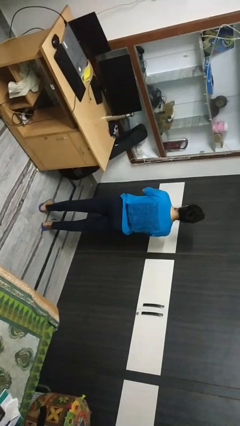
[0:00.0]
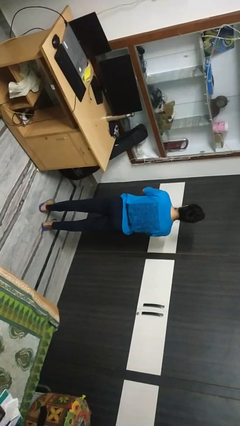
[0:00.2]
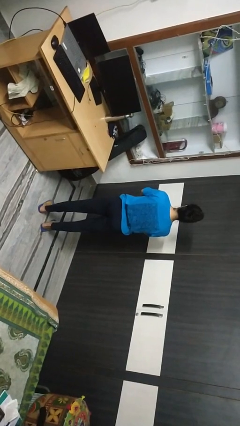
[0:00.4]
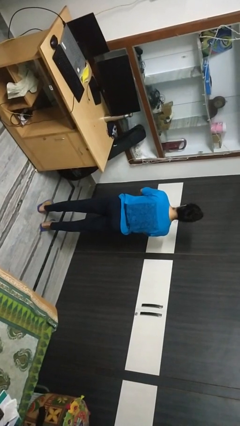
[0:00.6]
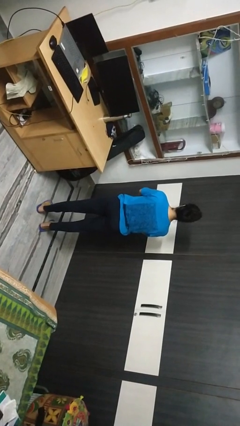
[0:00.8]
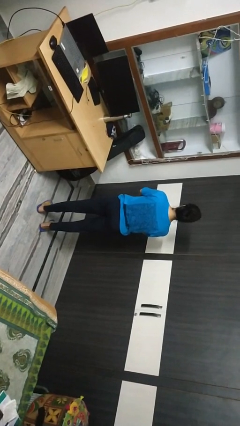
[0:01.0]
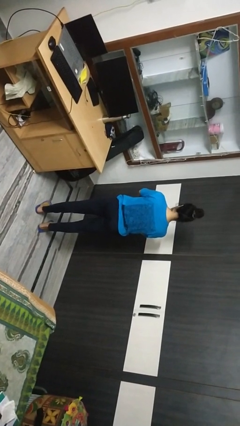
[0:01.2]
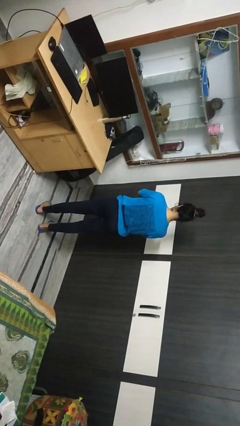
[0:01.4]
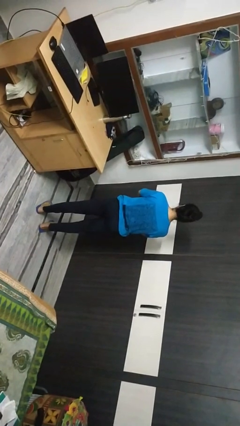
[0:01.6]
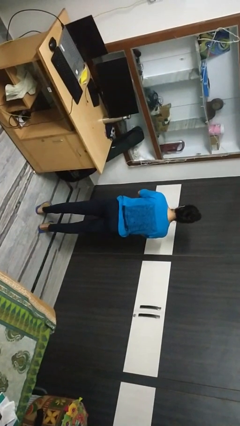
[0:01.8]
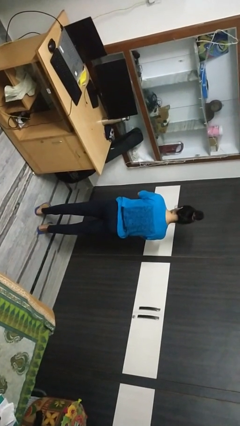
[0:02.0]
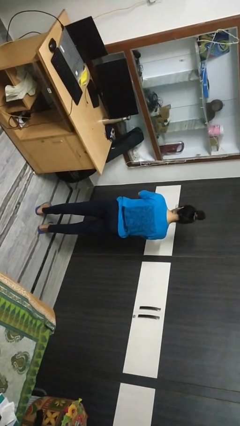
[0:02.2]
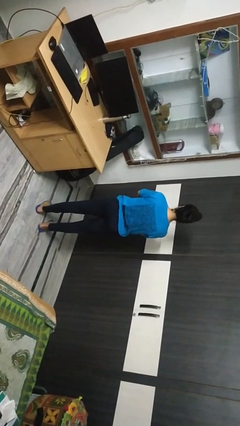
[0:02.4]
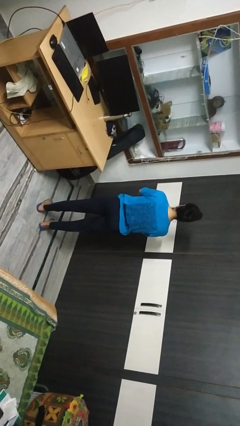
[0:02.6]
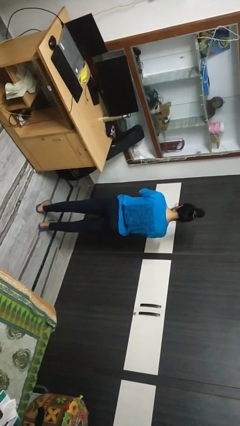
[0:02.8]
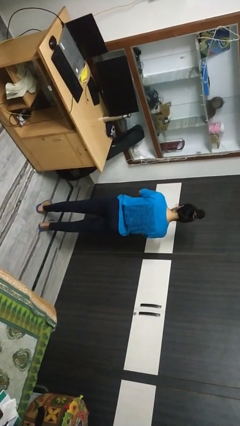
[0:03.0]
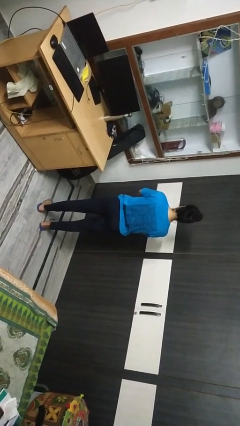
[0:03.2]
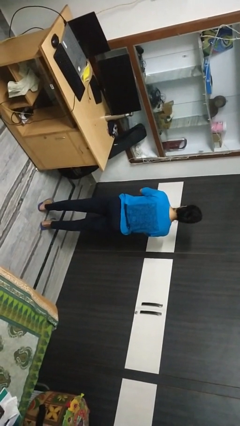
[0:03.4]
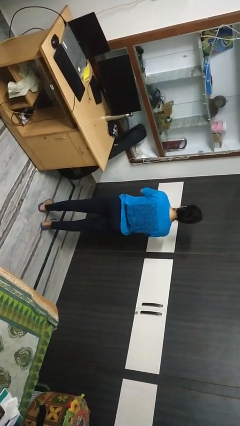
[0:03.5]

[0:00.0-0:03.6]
person nods head

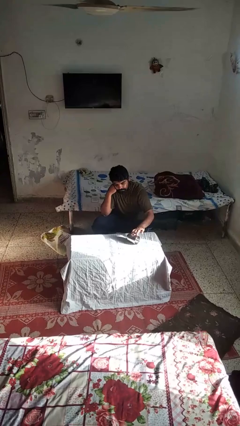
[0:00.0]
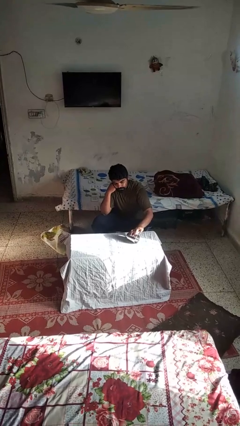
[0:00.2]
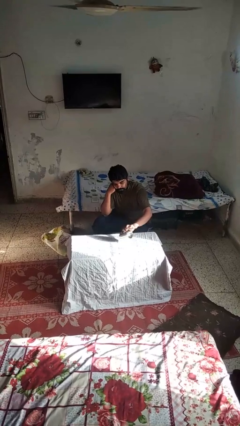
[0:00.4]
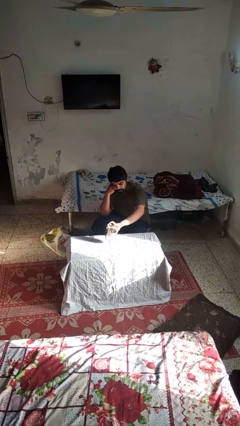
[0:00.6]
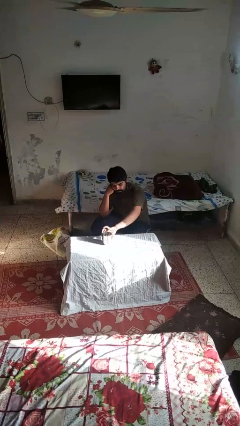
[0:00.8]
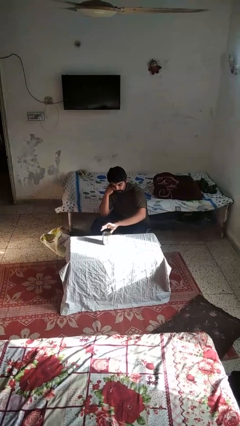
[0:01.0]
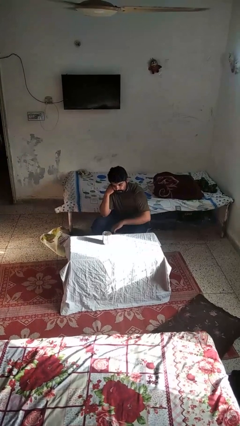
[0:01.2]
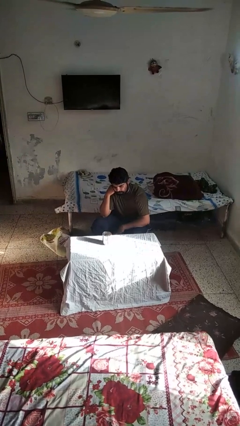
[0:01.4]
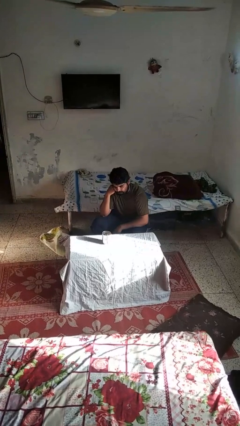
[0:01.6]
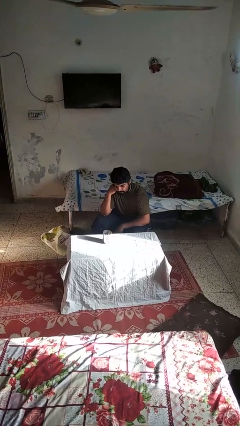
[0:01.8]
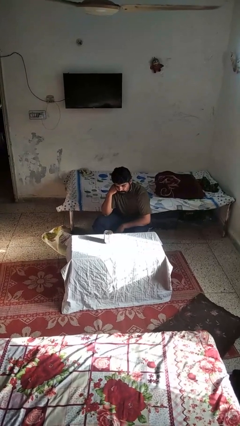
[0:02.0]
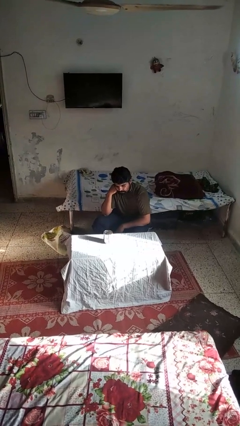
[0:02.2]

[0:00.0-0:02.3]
person sets upright glass

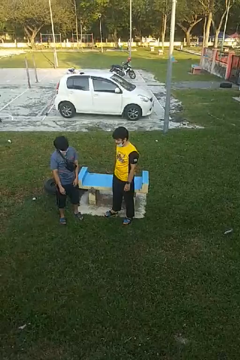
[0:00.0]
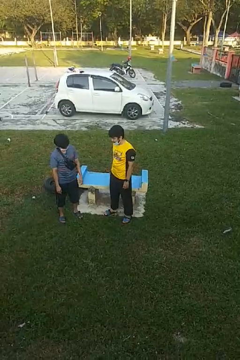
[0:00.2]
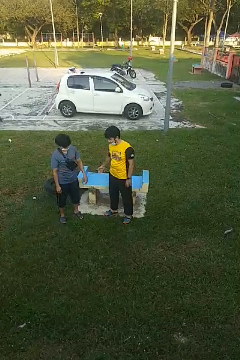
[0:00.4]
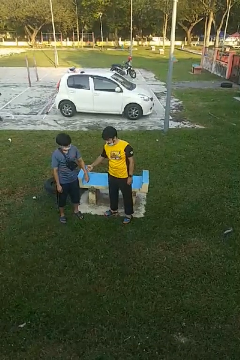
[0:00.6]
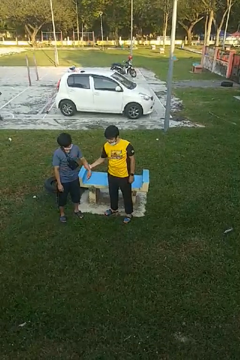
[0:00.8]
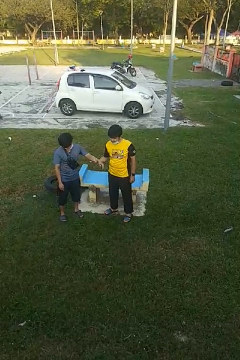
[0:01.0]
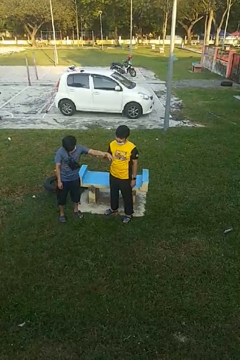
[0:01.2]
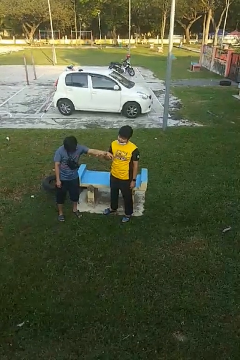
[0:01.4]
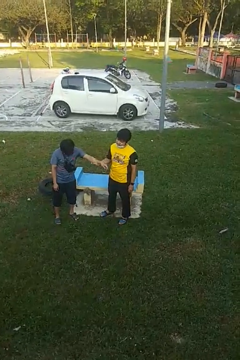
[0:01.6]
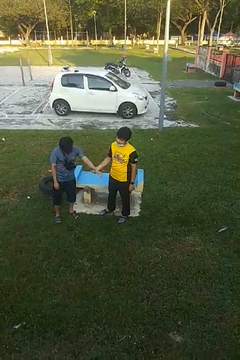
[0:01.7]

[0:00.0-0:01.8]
person grabs person by forearm

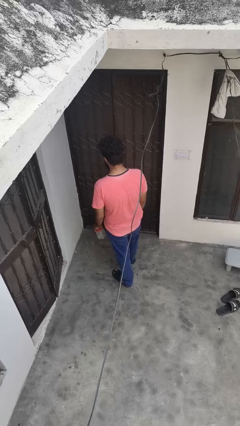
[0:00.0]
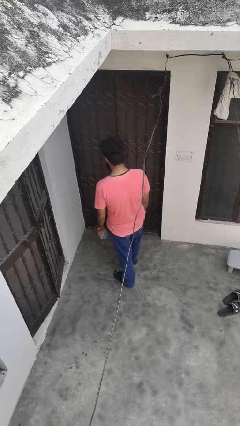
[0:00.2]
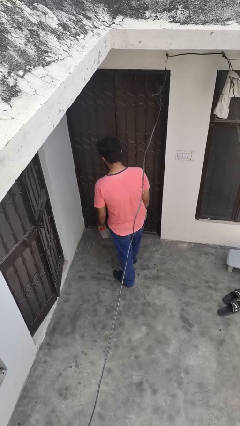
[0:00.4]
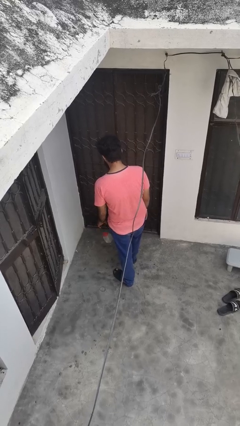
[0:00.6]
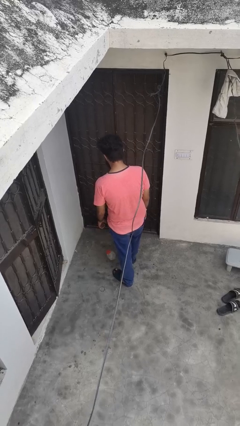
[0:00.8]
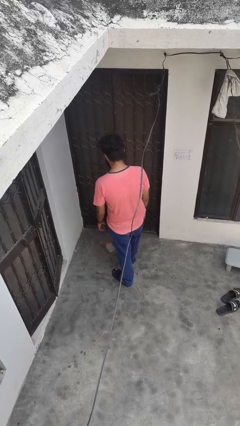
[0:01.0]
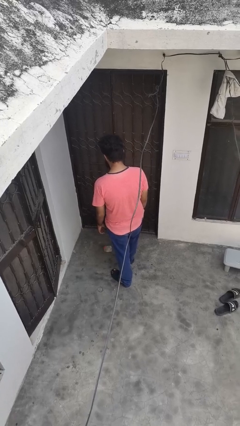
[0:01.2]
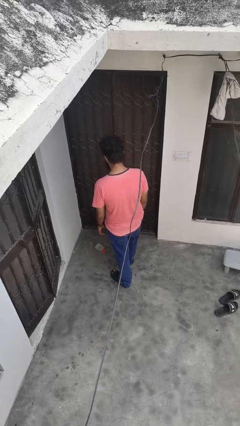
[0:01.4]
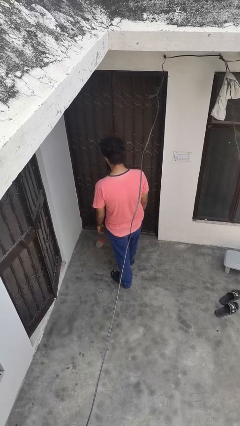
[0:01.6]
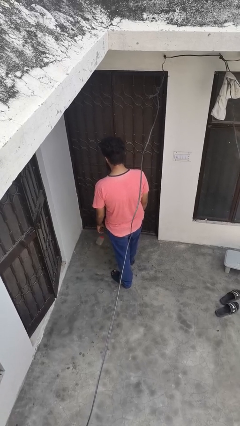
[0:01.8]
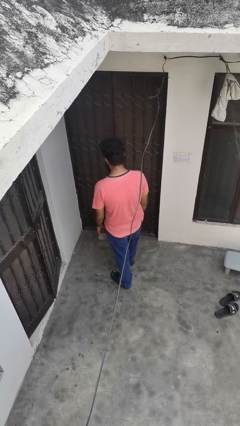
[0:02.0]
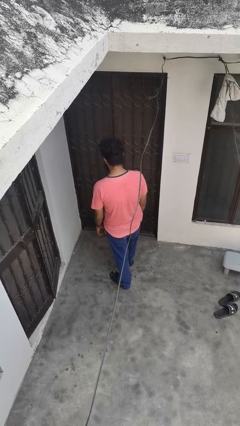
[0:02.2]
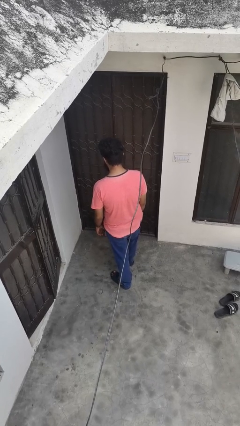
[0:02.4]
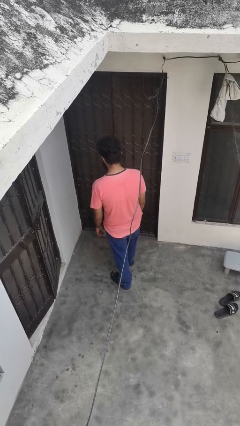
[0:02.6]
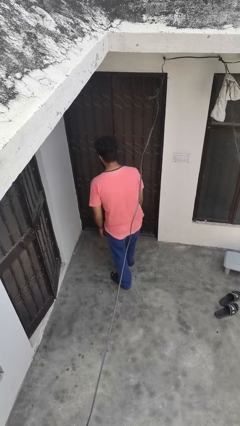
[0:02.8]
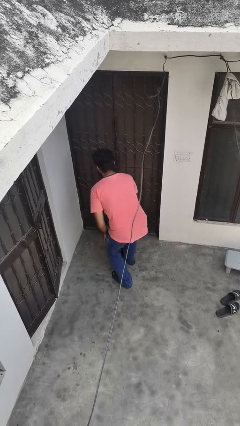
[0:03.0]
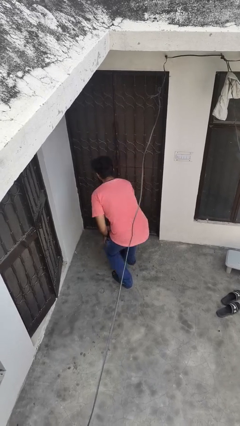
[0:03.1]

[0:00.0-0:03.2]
person drops object

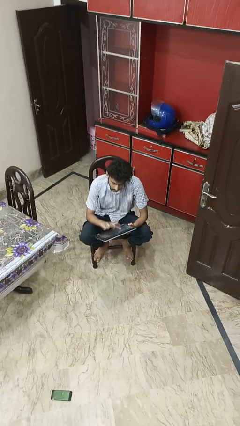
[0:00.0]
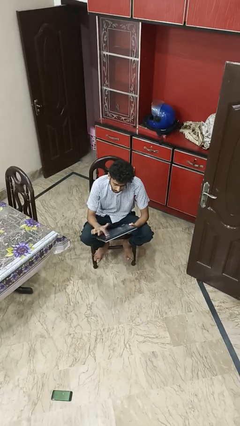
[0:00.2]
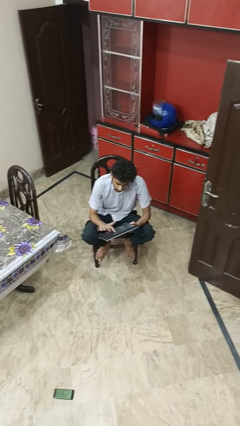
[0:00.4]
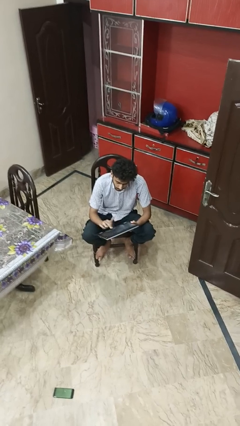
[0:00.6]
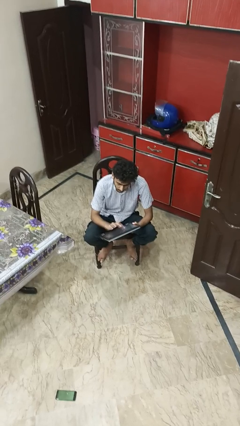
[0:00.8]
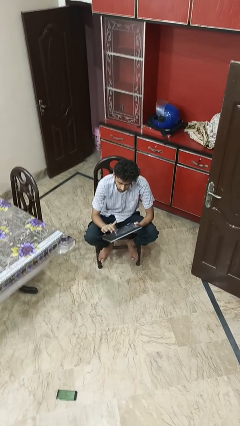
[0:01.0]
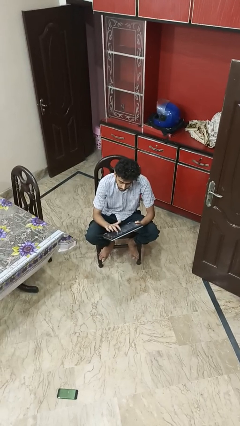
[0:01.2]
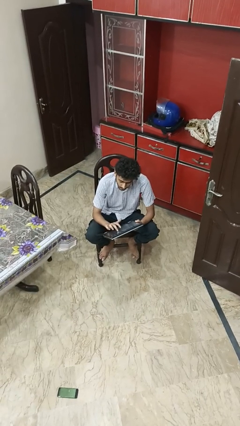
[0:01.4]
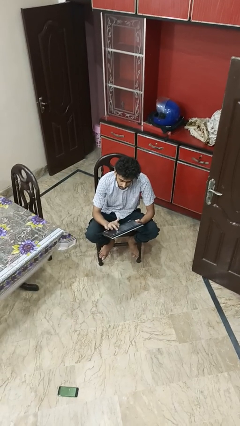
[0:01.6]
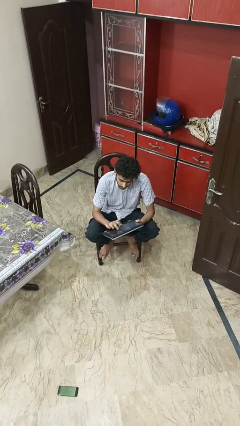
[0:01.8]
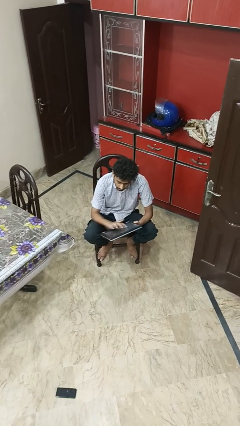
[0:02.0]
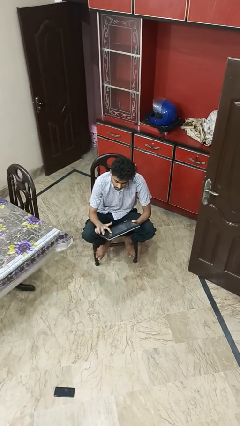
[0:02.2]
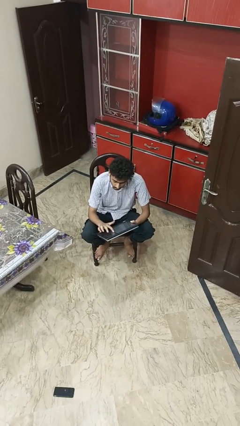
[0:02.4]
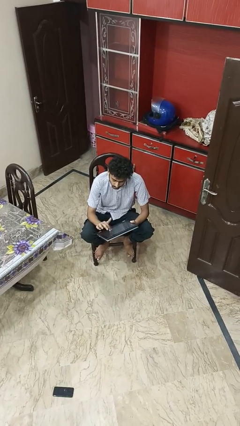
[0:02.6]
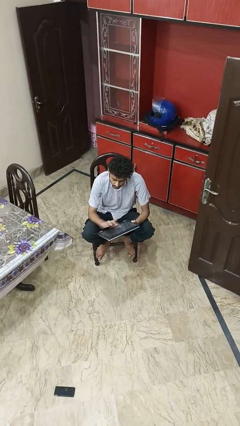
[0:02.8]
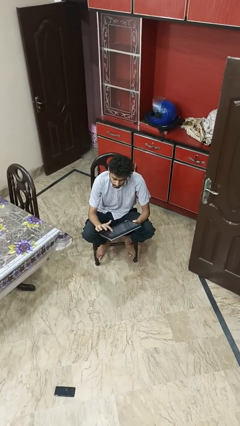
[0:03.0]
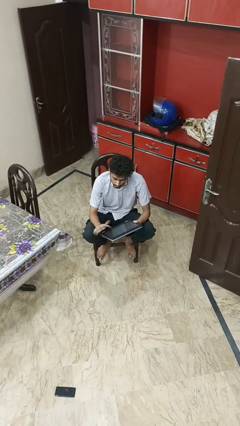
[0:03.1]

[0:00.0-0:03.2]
person interacts with tablet

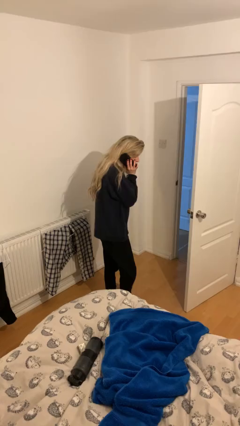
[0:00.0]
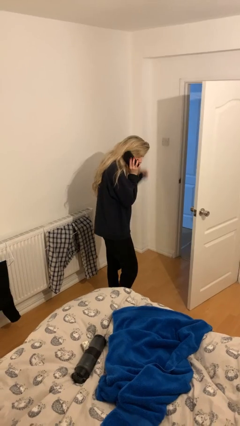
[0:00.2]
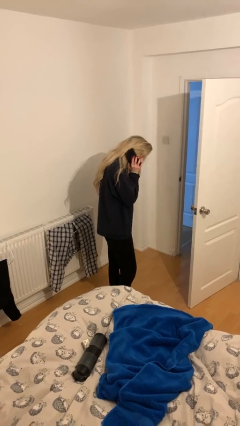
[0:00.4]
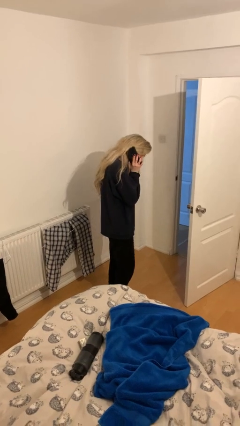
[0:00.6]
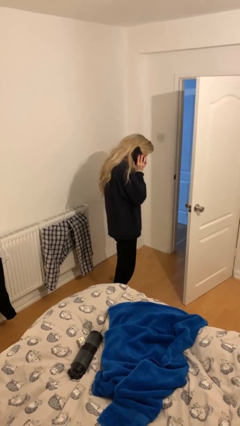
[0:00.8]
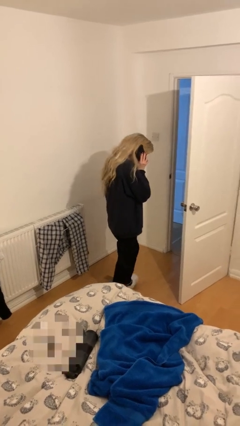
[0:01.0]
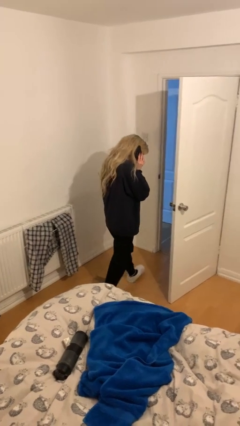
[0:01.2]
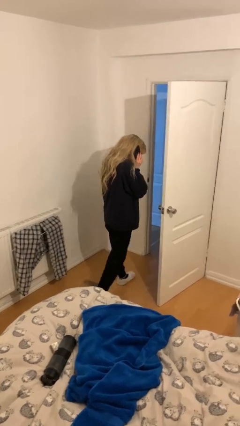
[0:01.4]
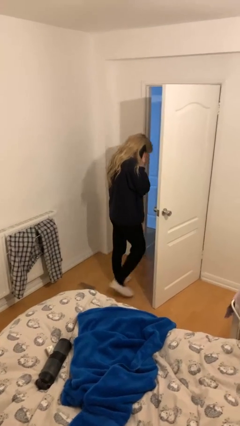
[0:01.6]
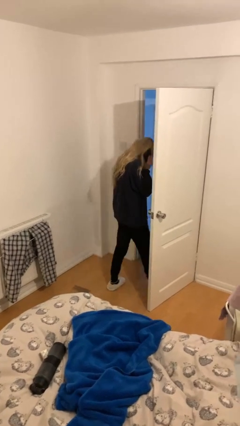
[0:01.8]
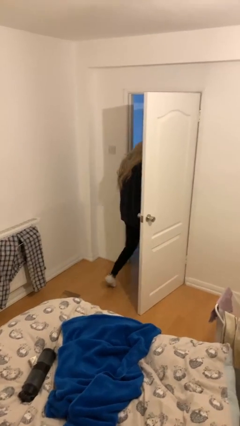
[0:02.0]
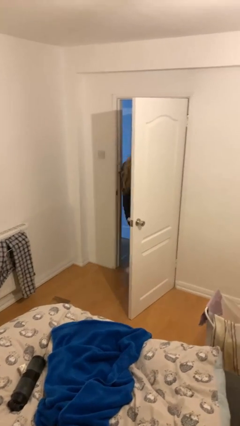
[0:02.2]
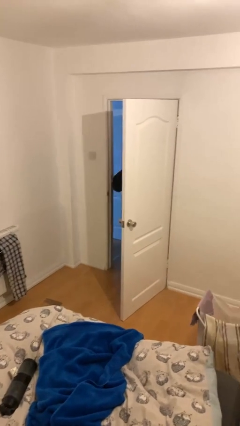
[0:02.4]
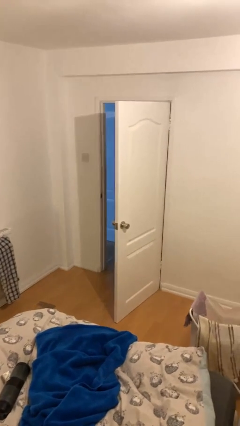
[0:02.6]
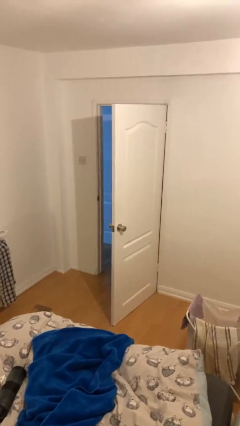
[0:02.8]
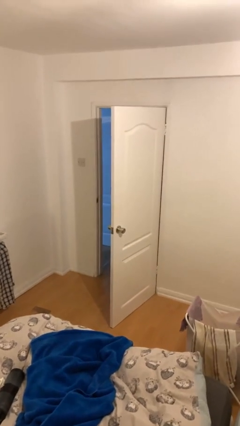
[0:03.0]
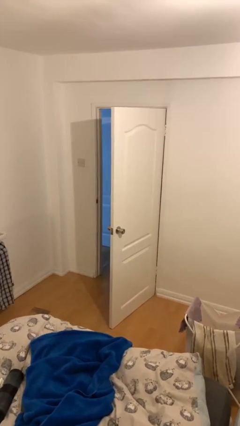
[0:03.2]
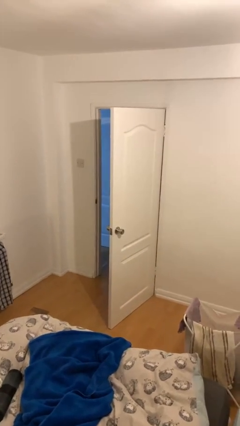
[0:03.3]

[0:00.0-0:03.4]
person exits scene through structure
